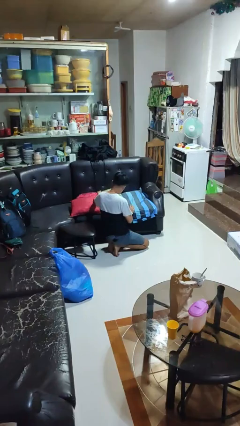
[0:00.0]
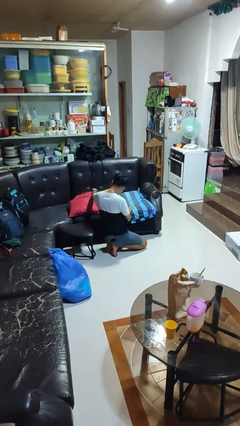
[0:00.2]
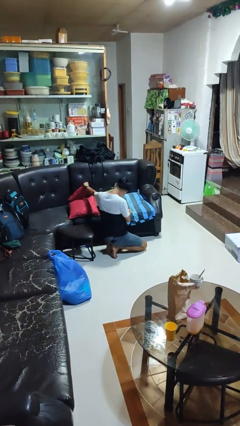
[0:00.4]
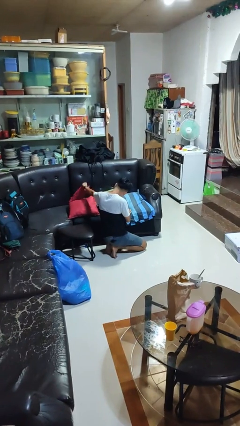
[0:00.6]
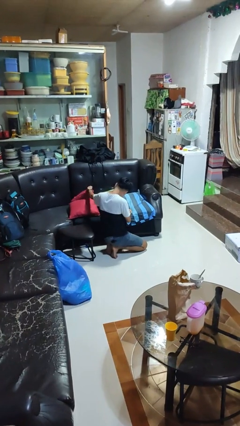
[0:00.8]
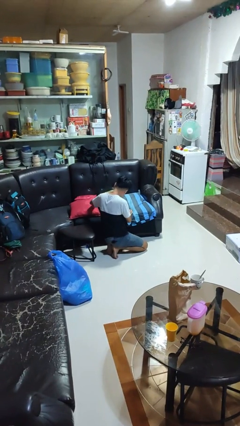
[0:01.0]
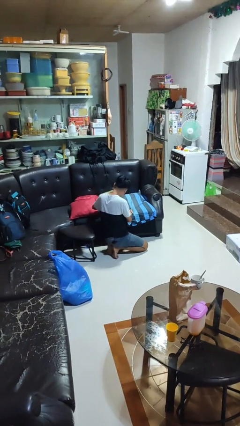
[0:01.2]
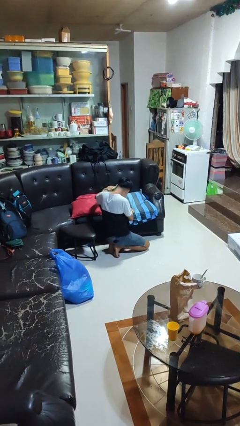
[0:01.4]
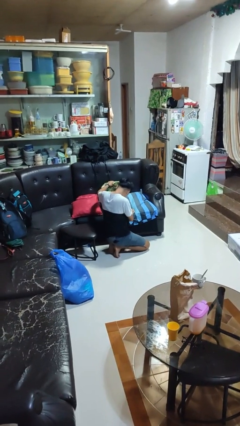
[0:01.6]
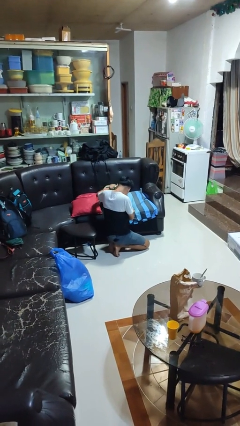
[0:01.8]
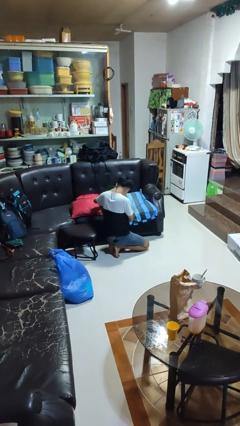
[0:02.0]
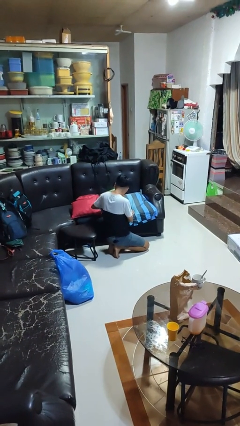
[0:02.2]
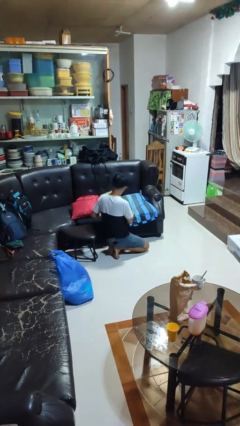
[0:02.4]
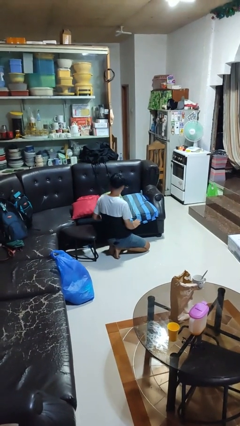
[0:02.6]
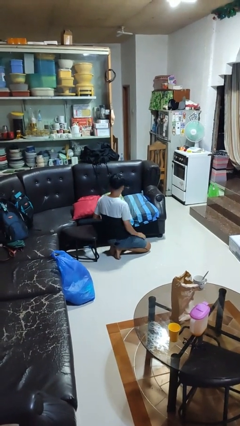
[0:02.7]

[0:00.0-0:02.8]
person searches in couch

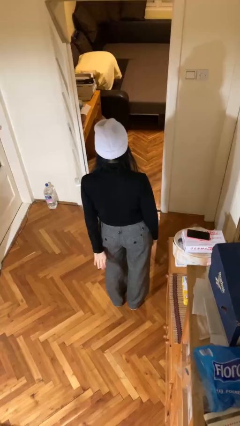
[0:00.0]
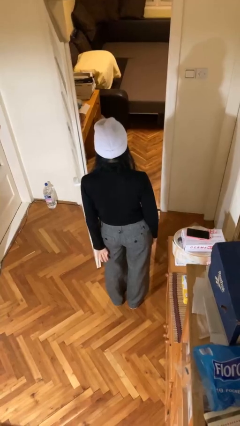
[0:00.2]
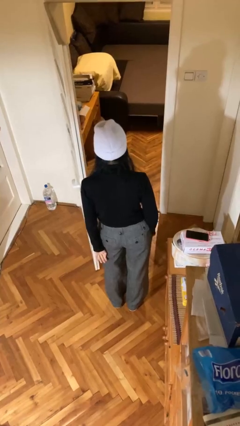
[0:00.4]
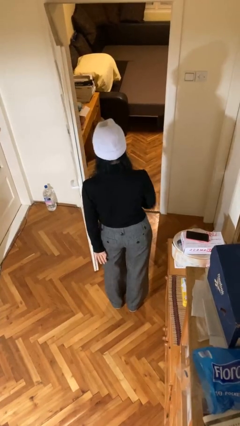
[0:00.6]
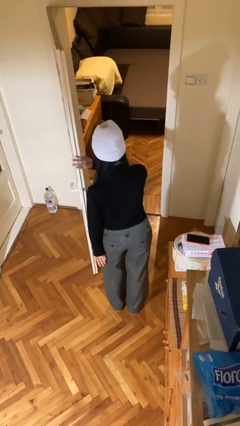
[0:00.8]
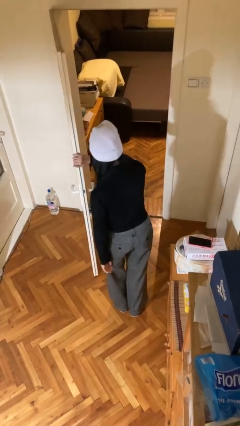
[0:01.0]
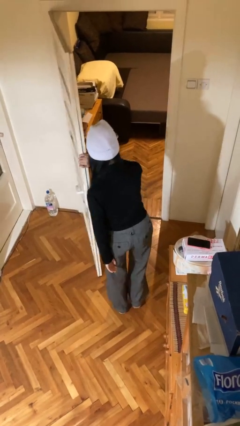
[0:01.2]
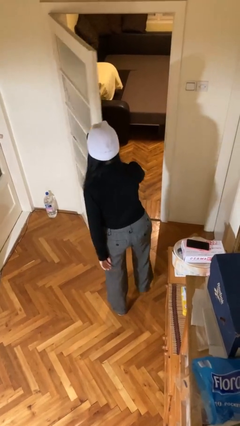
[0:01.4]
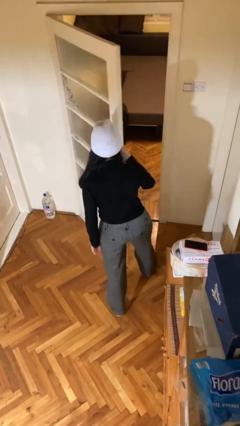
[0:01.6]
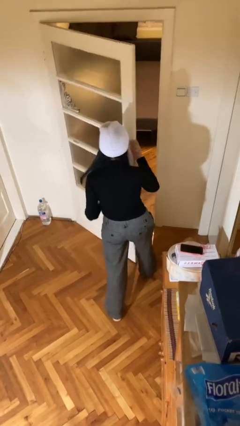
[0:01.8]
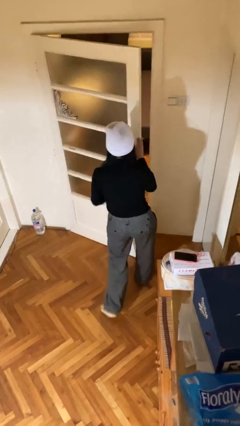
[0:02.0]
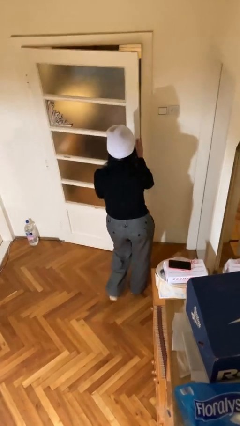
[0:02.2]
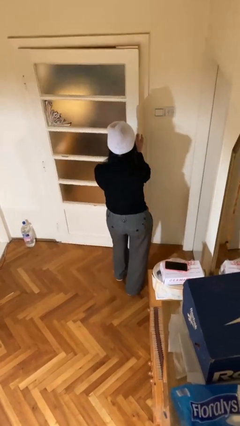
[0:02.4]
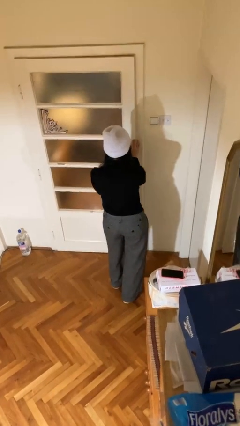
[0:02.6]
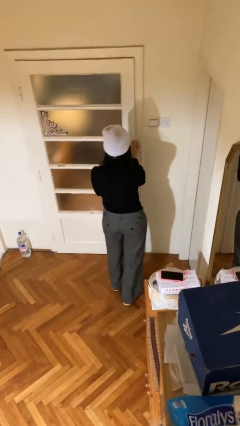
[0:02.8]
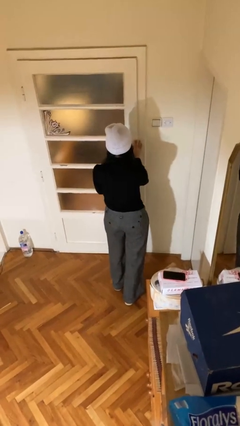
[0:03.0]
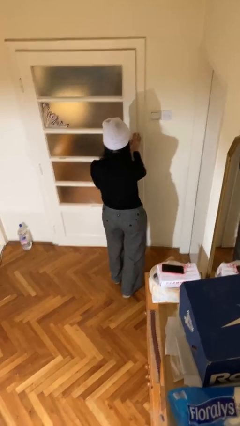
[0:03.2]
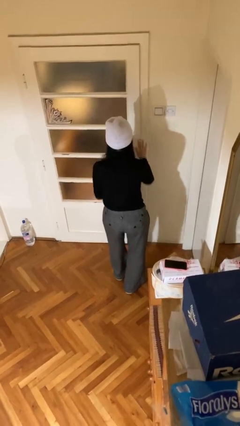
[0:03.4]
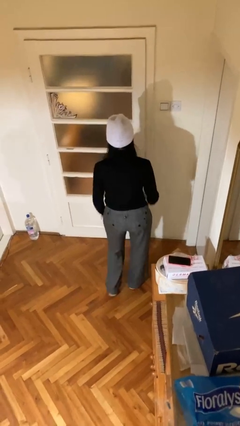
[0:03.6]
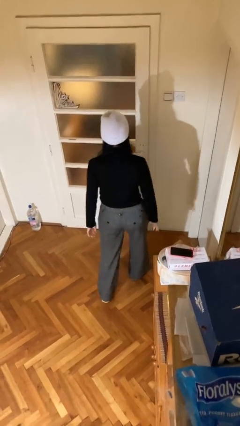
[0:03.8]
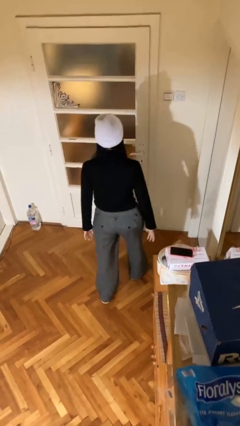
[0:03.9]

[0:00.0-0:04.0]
person closes facility door

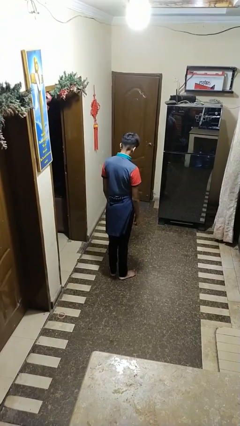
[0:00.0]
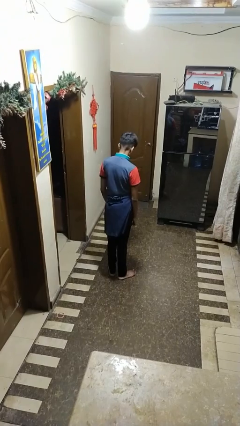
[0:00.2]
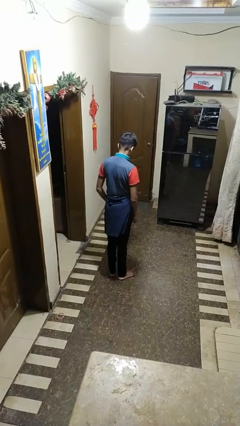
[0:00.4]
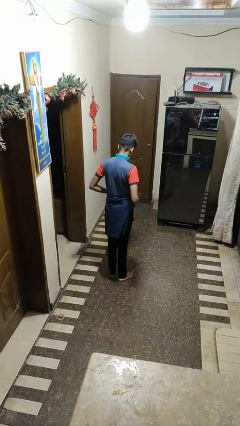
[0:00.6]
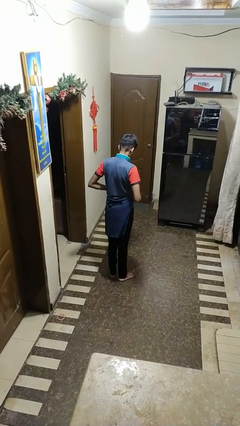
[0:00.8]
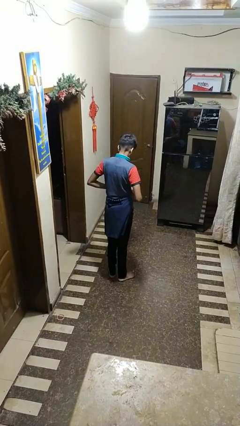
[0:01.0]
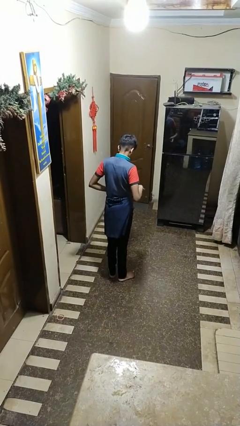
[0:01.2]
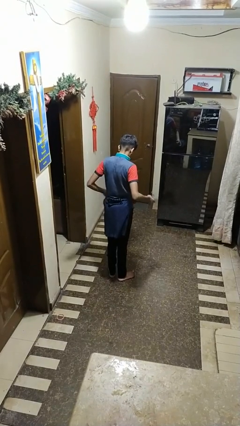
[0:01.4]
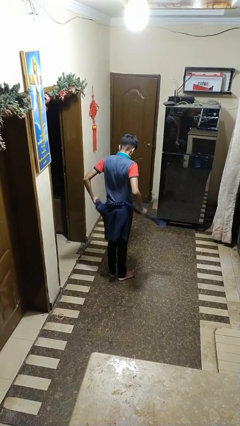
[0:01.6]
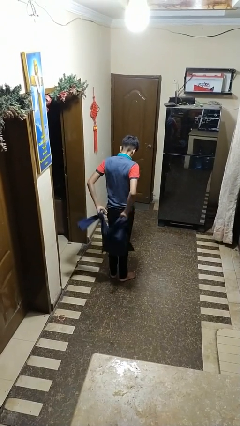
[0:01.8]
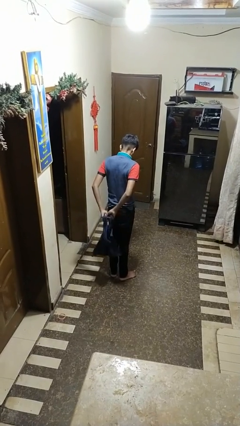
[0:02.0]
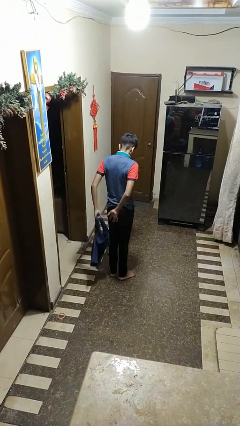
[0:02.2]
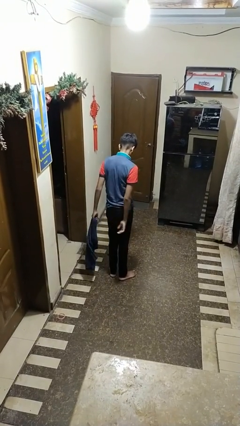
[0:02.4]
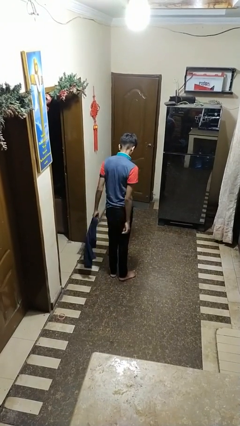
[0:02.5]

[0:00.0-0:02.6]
person unties jacket around waist

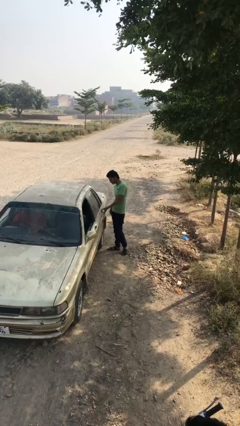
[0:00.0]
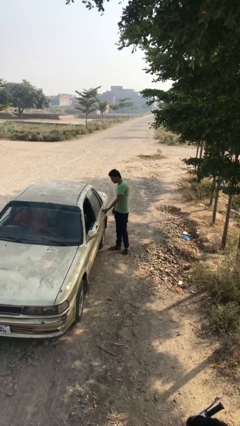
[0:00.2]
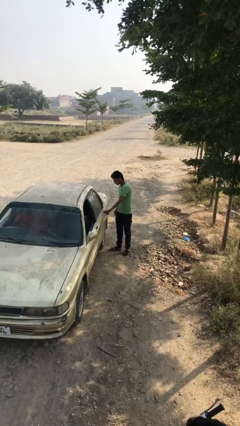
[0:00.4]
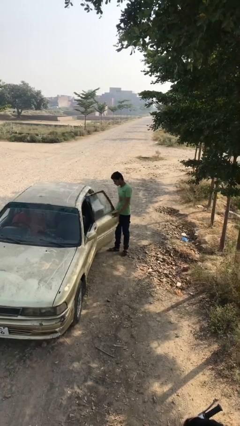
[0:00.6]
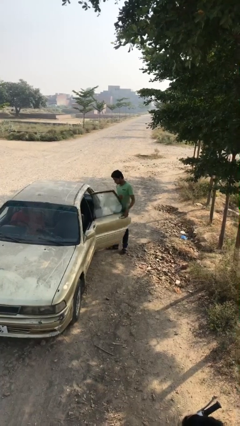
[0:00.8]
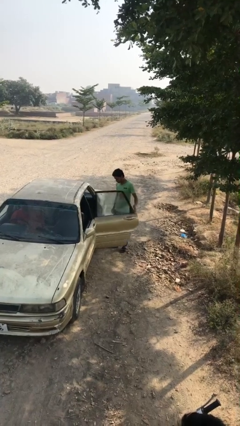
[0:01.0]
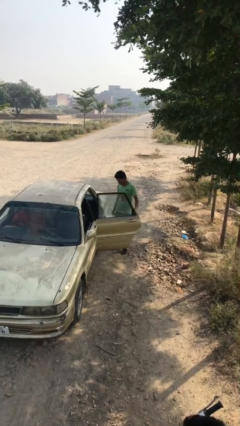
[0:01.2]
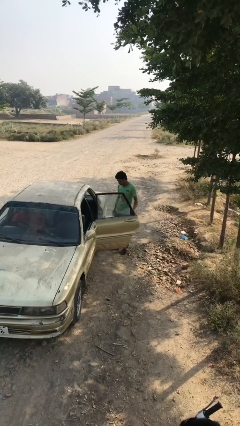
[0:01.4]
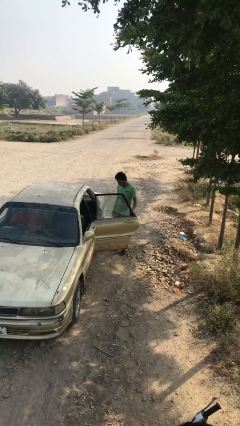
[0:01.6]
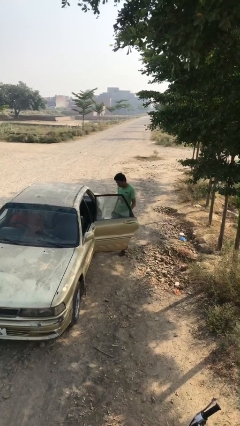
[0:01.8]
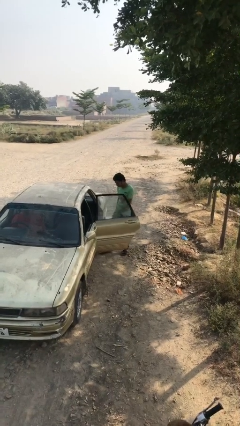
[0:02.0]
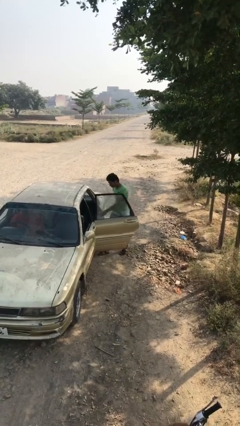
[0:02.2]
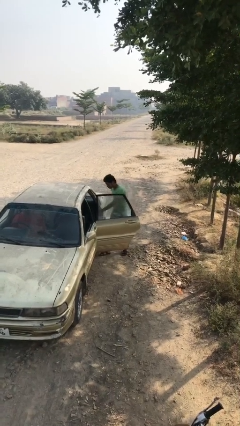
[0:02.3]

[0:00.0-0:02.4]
person opens car door

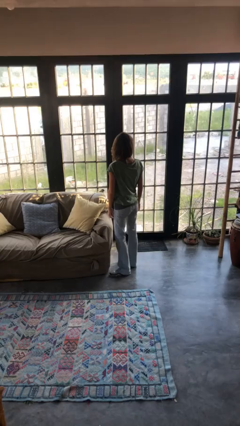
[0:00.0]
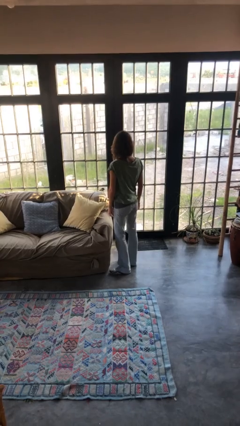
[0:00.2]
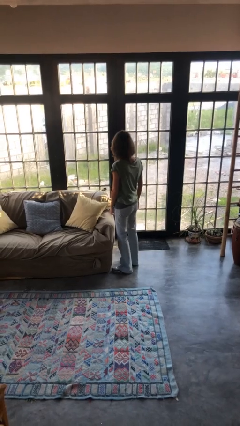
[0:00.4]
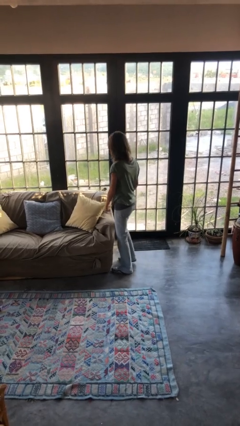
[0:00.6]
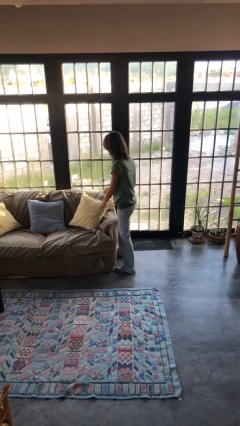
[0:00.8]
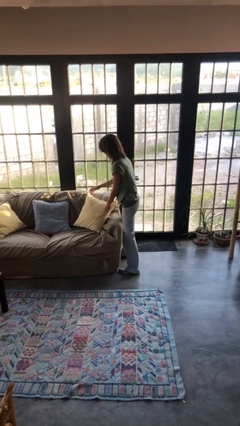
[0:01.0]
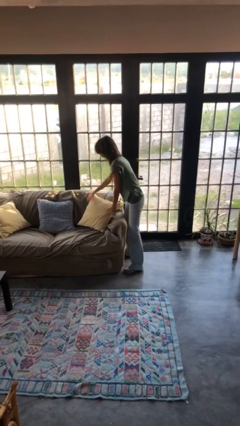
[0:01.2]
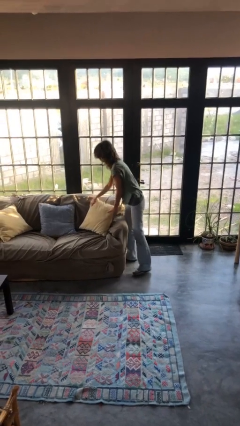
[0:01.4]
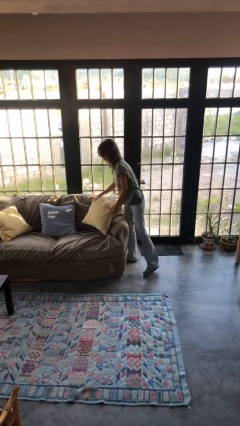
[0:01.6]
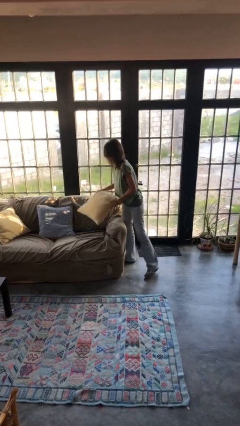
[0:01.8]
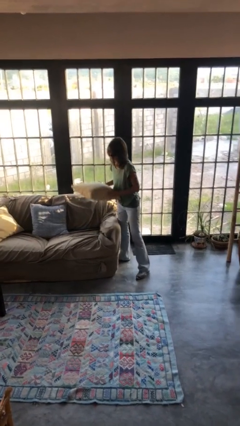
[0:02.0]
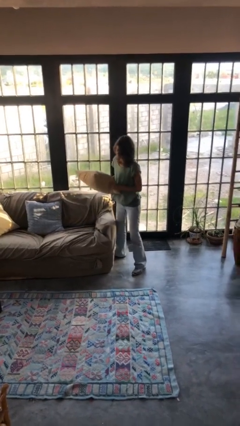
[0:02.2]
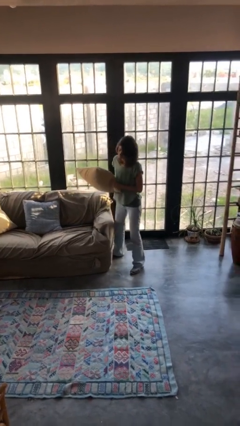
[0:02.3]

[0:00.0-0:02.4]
person picks up object from couch

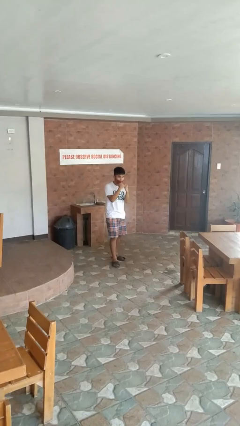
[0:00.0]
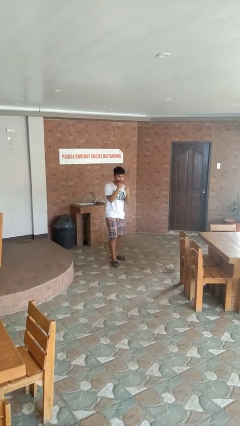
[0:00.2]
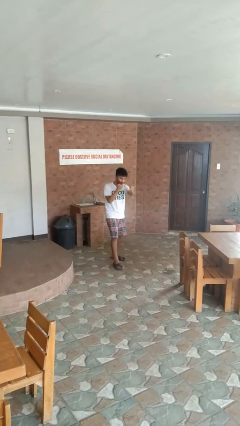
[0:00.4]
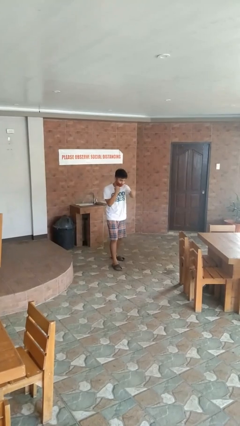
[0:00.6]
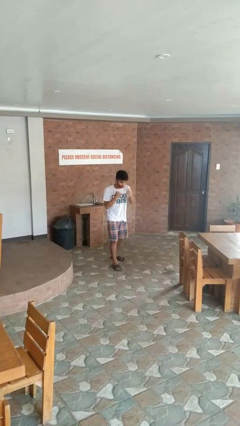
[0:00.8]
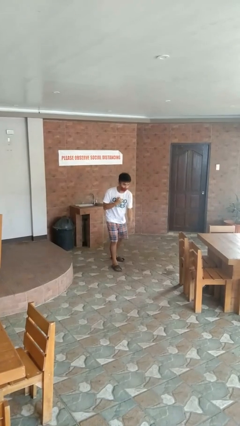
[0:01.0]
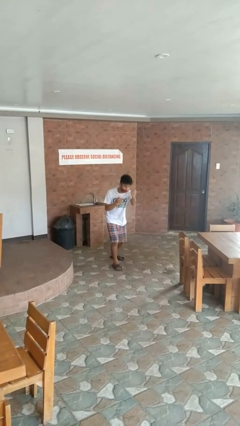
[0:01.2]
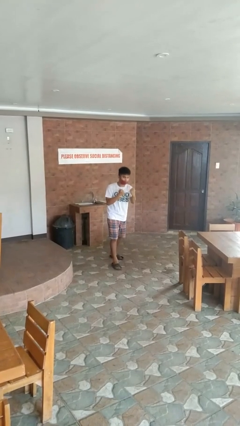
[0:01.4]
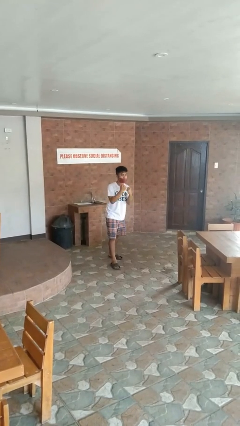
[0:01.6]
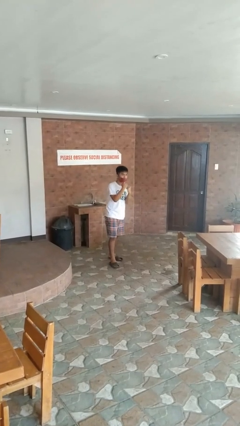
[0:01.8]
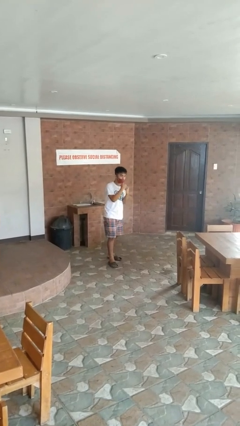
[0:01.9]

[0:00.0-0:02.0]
person punches

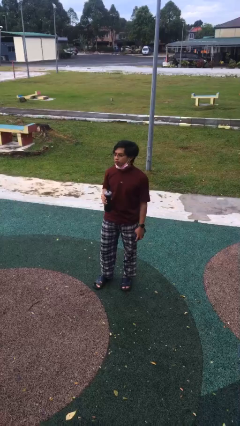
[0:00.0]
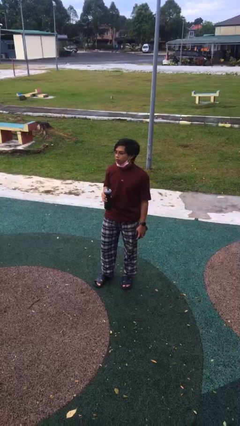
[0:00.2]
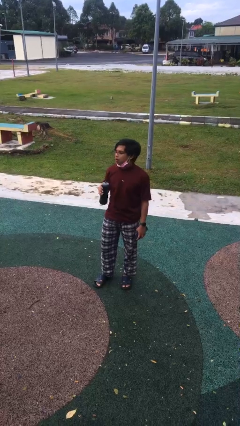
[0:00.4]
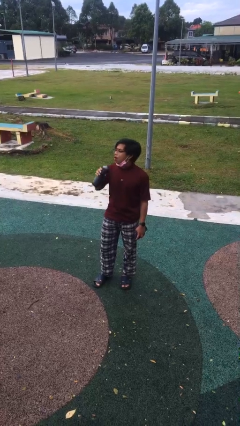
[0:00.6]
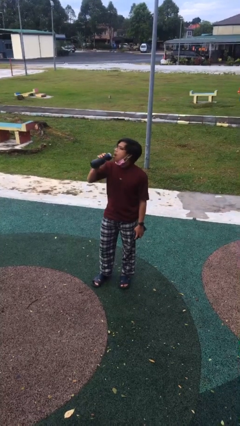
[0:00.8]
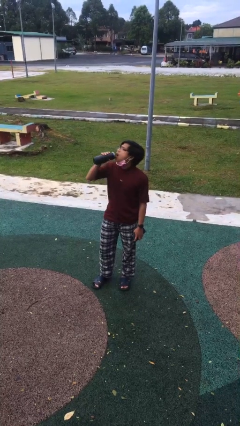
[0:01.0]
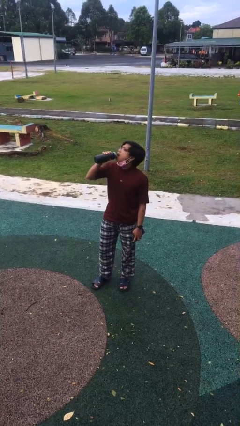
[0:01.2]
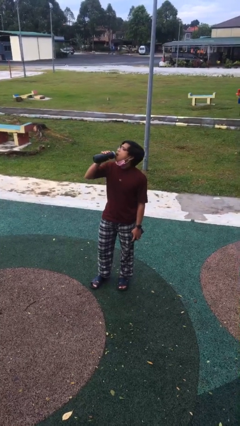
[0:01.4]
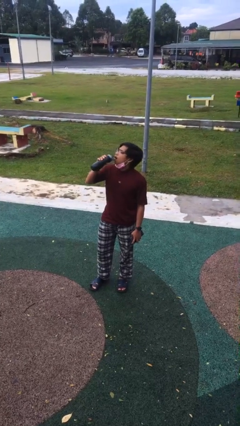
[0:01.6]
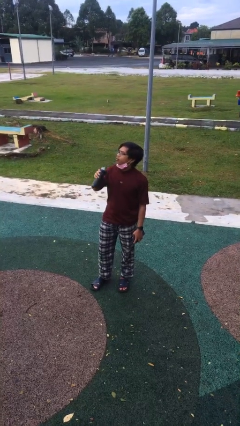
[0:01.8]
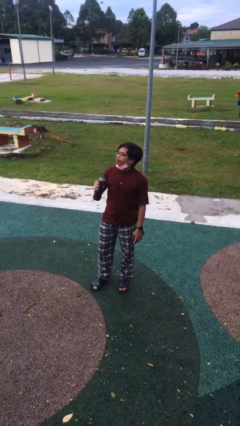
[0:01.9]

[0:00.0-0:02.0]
person drinks from bottle
